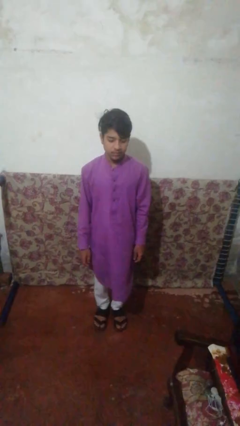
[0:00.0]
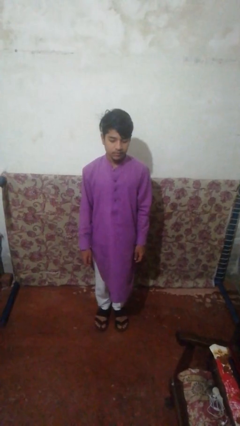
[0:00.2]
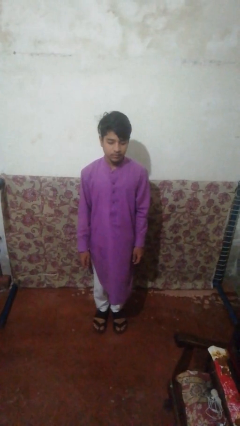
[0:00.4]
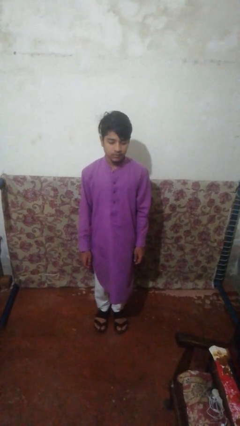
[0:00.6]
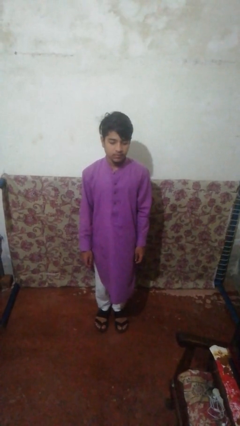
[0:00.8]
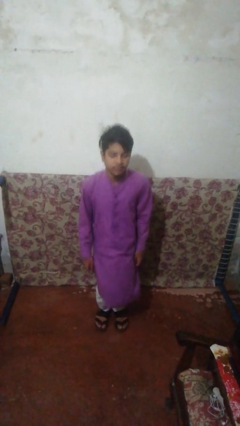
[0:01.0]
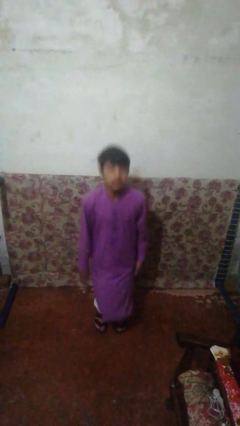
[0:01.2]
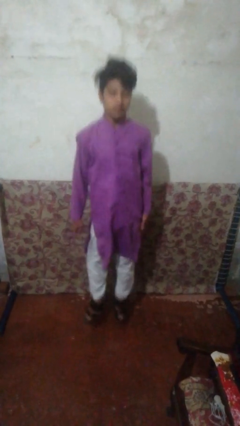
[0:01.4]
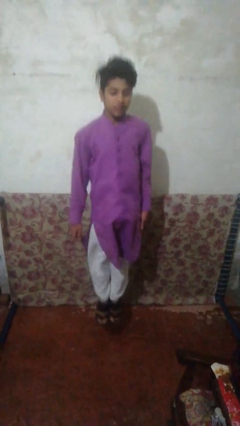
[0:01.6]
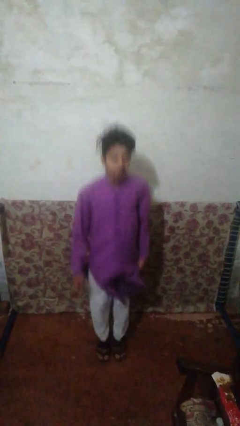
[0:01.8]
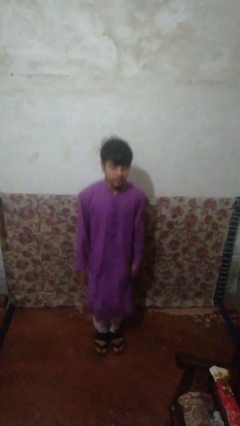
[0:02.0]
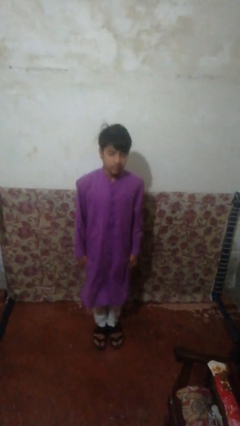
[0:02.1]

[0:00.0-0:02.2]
person jumps

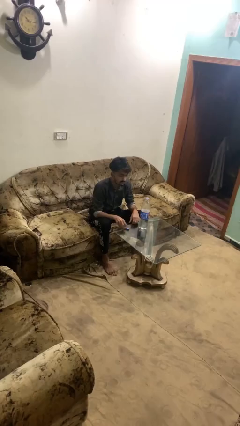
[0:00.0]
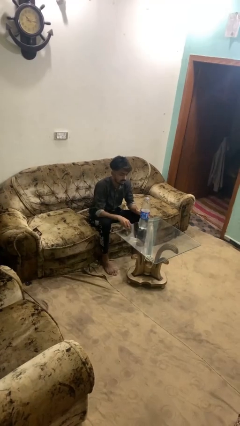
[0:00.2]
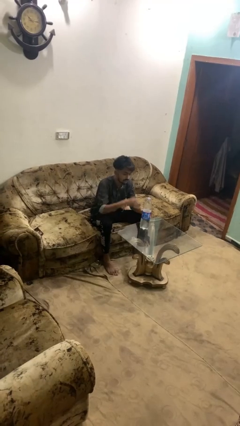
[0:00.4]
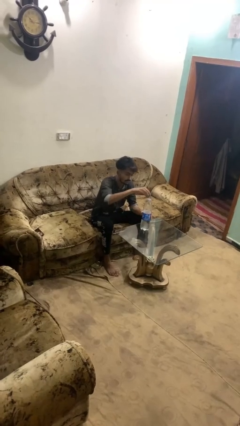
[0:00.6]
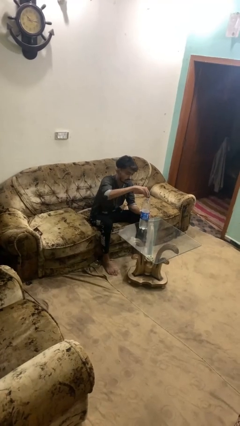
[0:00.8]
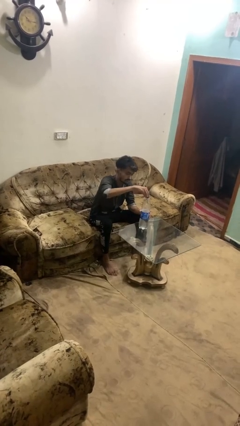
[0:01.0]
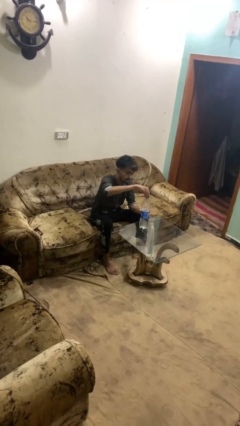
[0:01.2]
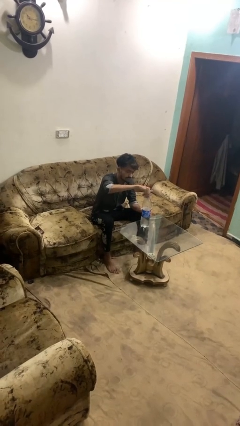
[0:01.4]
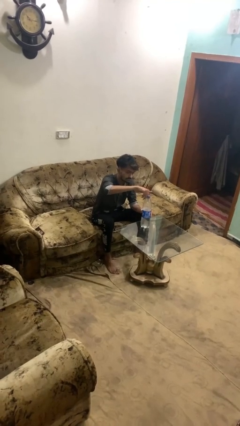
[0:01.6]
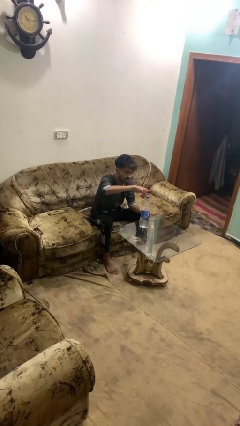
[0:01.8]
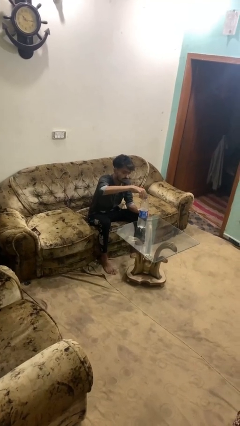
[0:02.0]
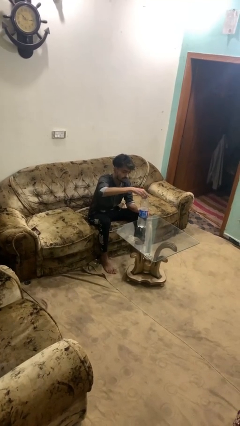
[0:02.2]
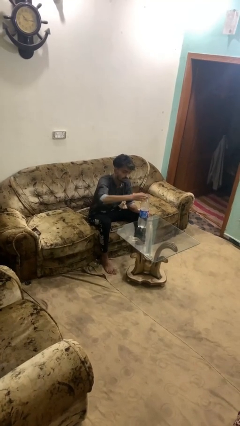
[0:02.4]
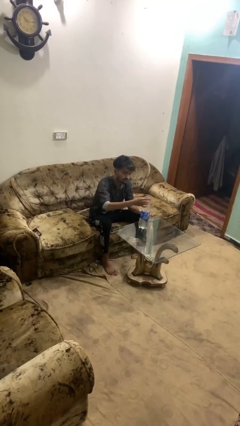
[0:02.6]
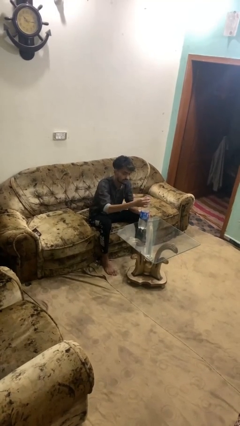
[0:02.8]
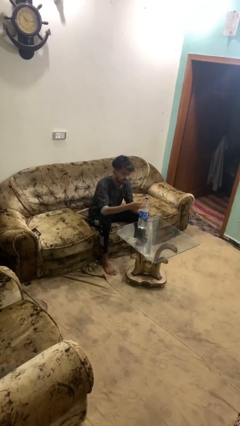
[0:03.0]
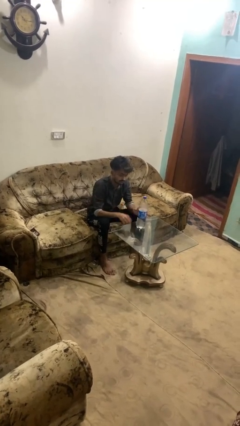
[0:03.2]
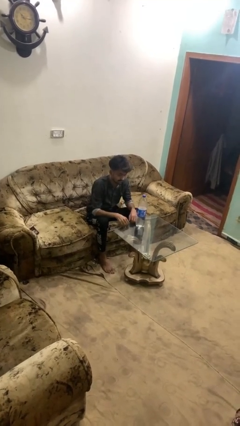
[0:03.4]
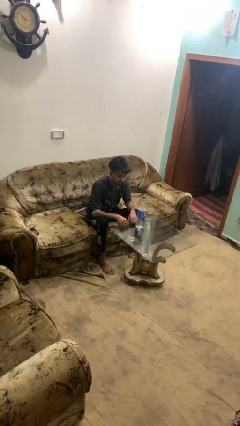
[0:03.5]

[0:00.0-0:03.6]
person screws lid to bottle

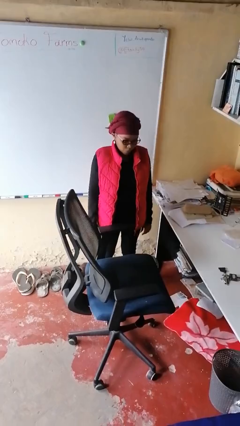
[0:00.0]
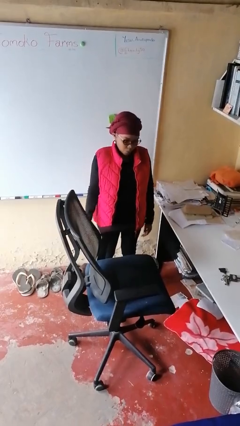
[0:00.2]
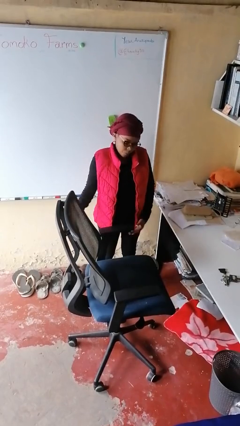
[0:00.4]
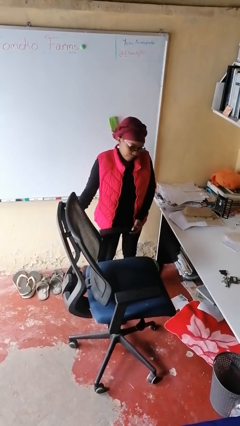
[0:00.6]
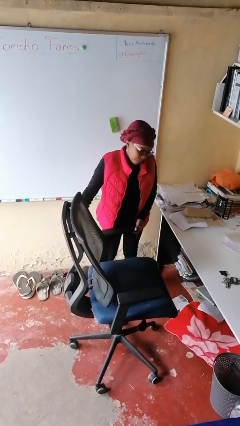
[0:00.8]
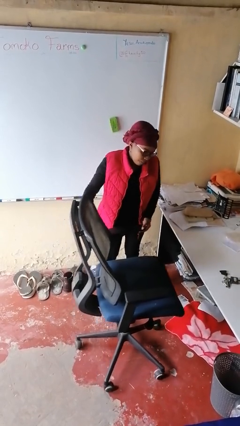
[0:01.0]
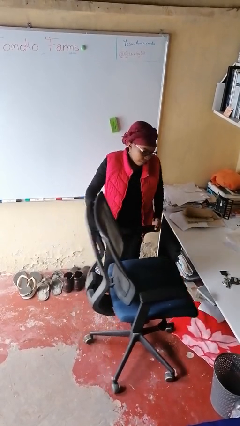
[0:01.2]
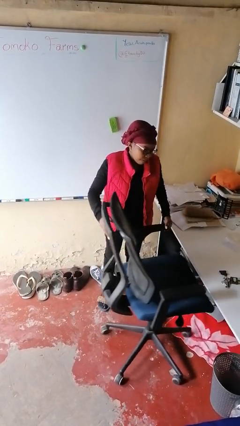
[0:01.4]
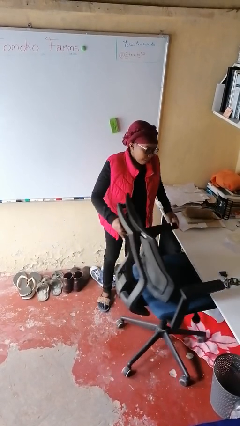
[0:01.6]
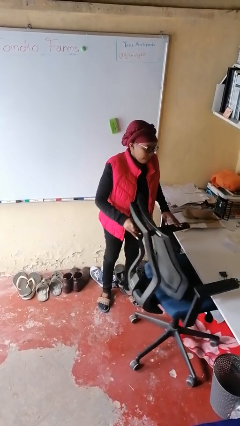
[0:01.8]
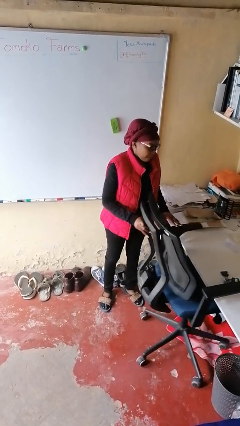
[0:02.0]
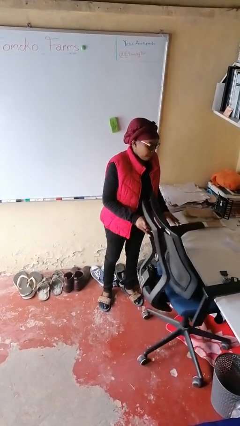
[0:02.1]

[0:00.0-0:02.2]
person pushes in chair

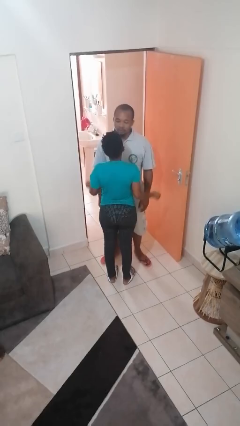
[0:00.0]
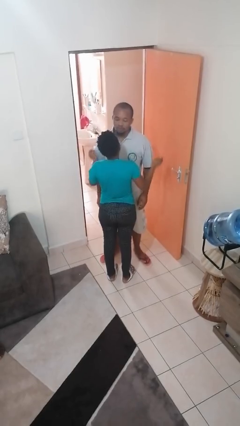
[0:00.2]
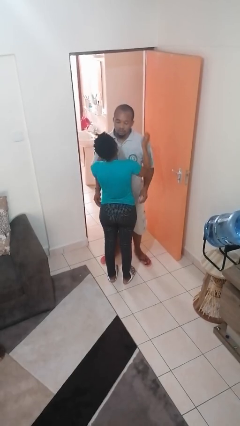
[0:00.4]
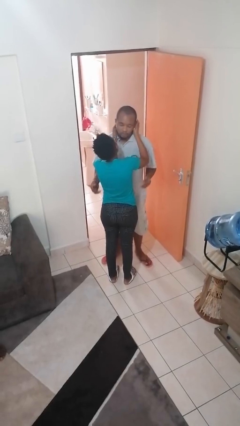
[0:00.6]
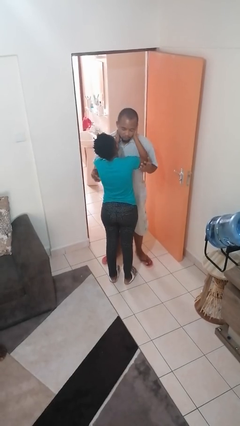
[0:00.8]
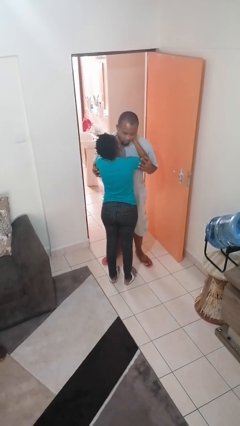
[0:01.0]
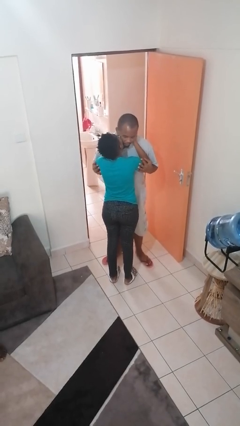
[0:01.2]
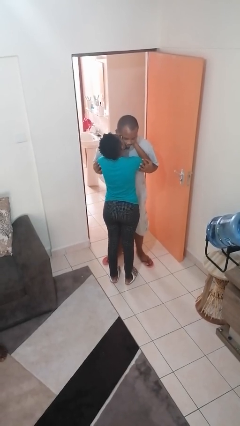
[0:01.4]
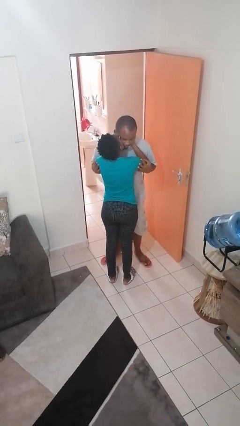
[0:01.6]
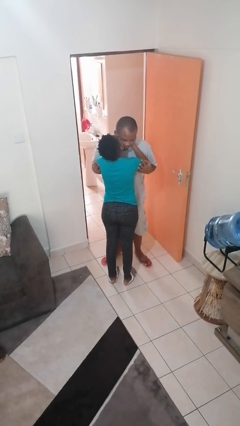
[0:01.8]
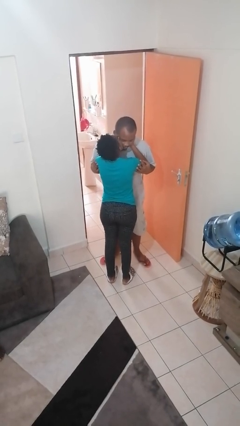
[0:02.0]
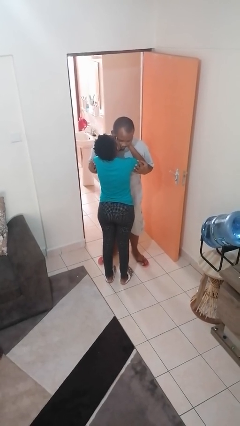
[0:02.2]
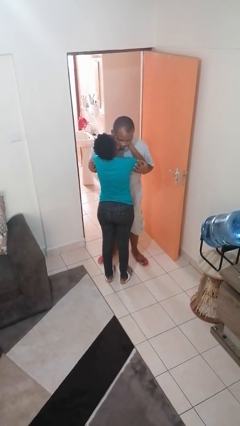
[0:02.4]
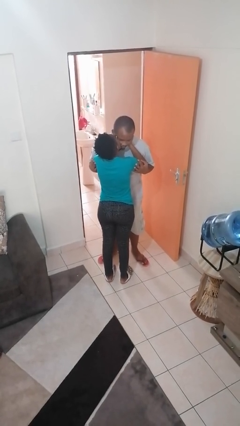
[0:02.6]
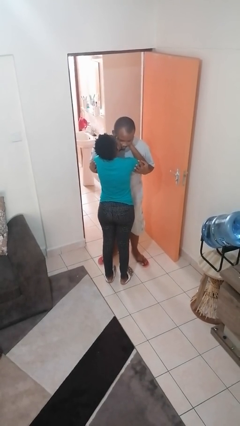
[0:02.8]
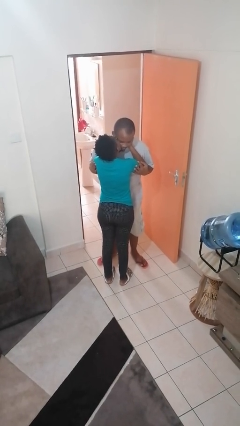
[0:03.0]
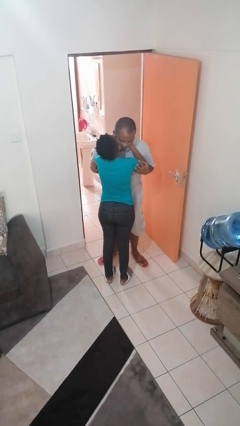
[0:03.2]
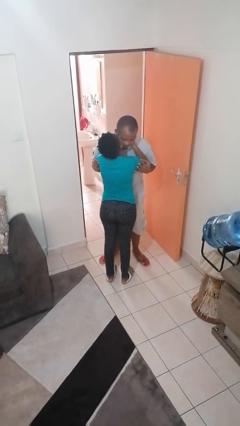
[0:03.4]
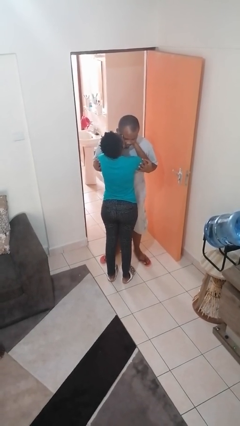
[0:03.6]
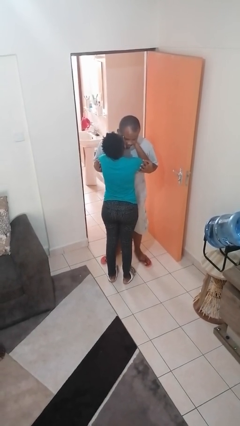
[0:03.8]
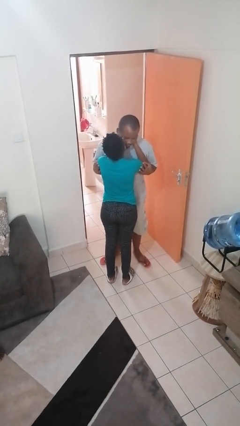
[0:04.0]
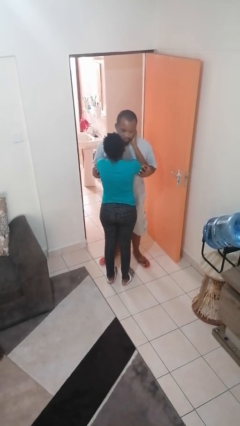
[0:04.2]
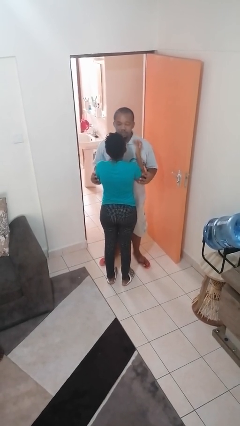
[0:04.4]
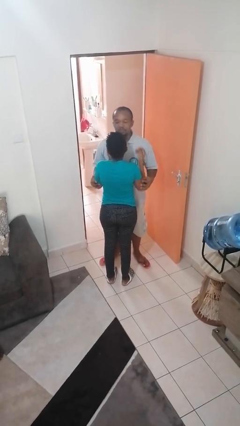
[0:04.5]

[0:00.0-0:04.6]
person kisses cheek of person

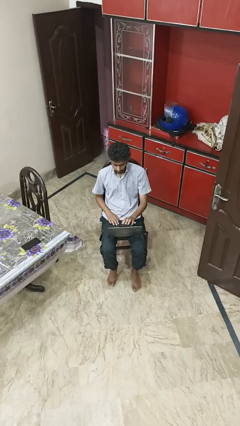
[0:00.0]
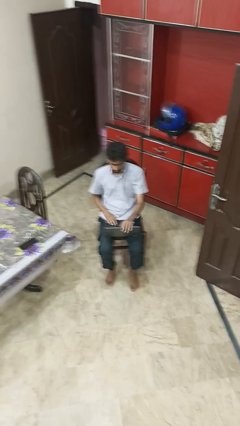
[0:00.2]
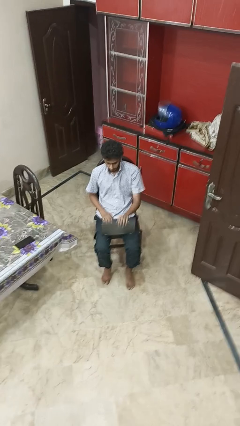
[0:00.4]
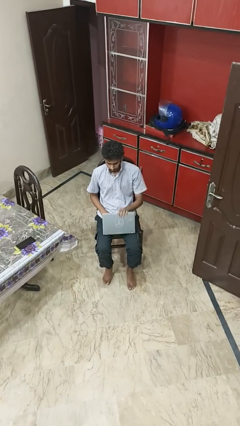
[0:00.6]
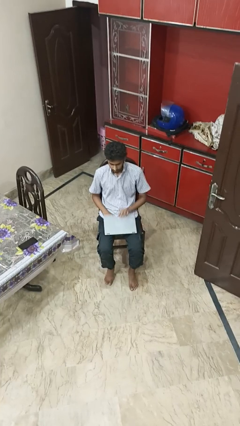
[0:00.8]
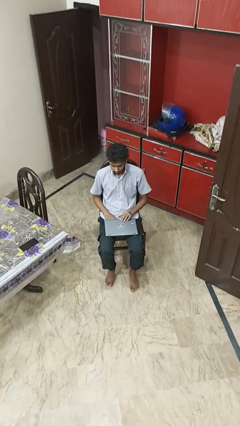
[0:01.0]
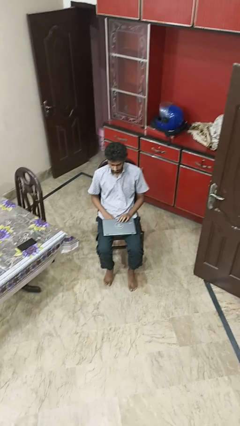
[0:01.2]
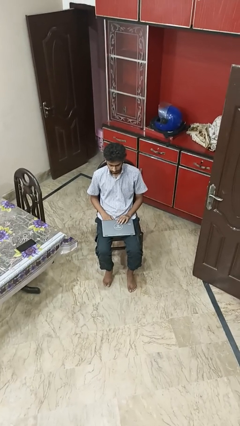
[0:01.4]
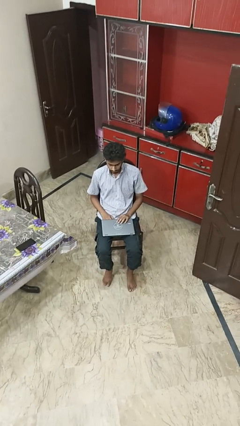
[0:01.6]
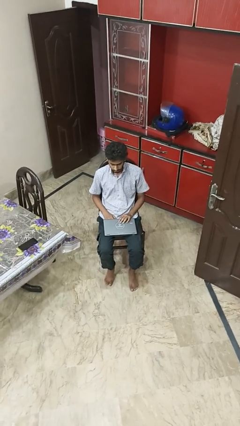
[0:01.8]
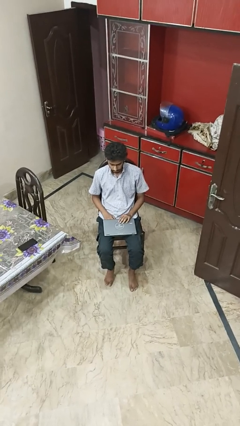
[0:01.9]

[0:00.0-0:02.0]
person closes laptop

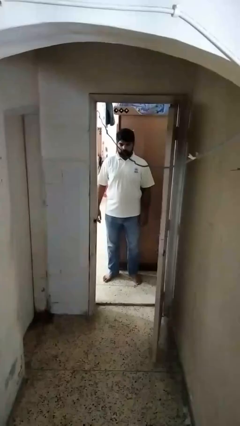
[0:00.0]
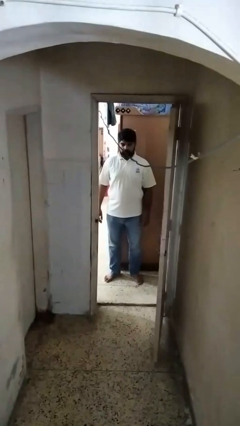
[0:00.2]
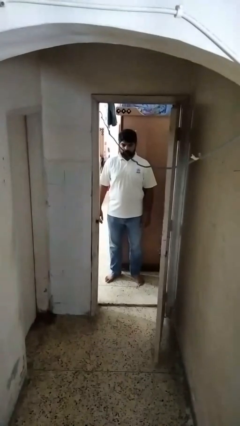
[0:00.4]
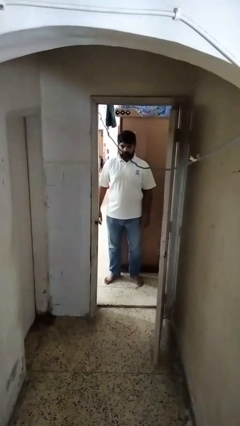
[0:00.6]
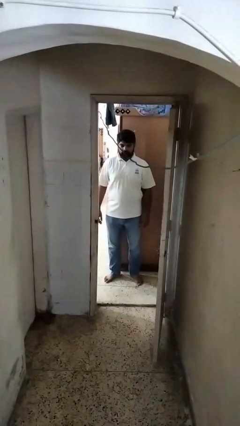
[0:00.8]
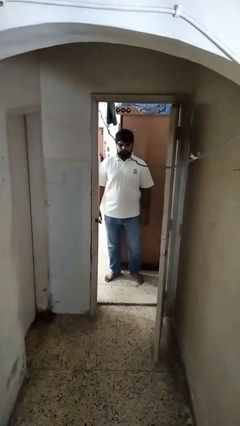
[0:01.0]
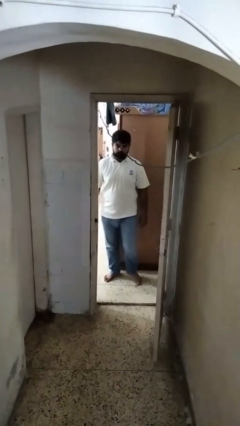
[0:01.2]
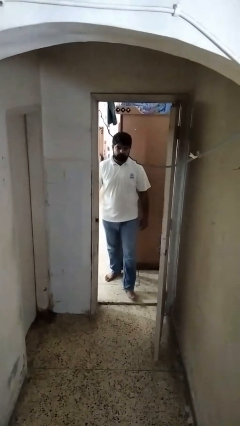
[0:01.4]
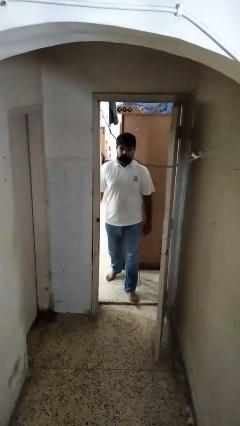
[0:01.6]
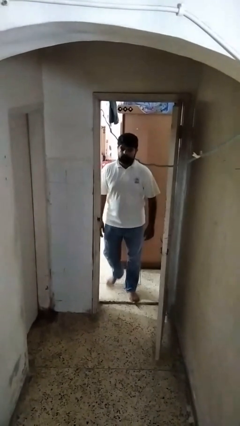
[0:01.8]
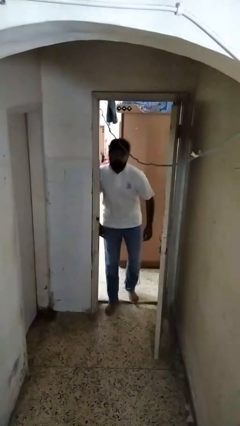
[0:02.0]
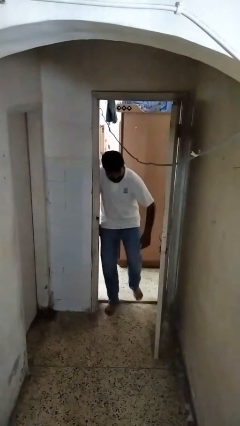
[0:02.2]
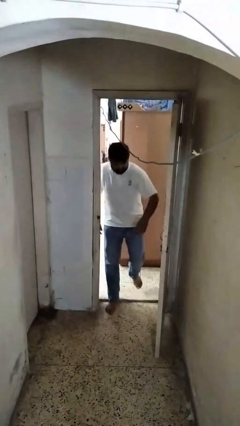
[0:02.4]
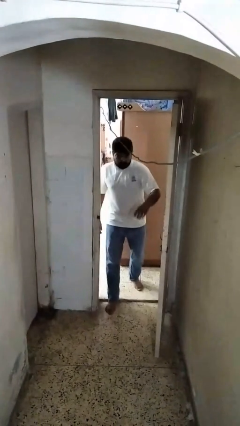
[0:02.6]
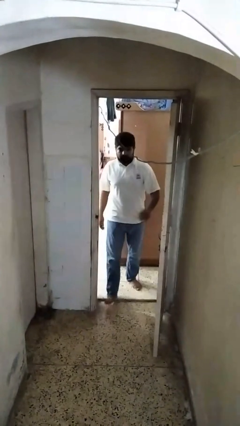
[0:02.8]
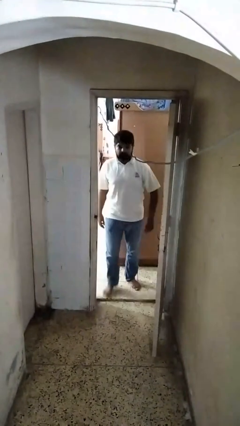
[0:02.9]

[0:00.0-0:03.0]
person bumps into wall
